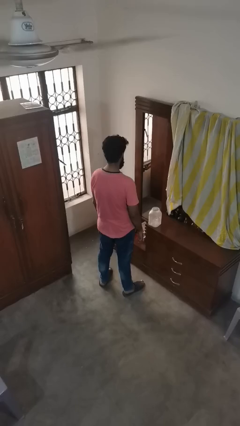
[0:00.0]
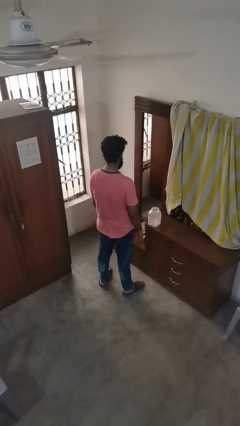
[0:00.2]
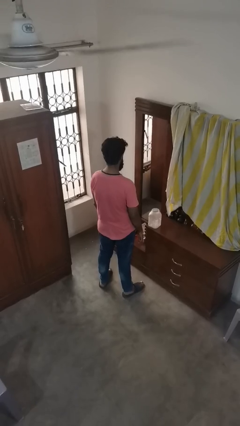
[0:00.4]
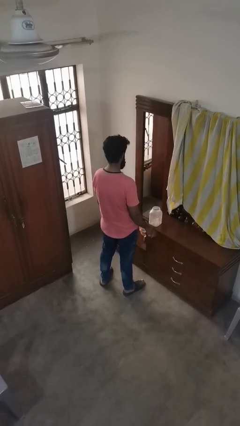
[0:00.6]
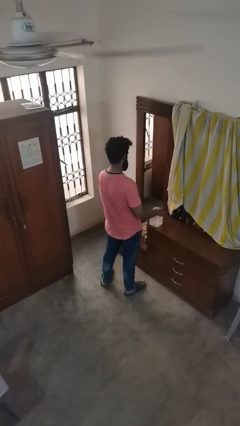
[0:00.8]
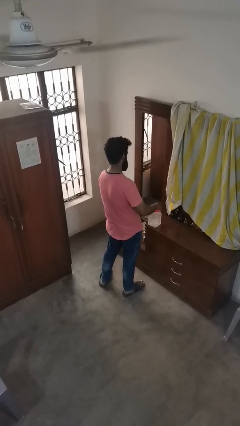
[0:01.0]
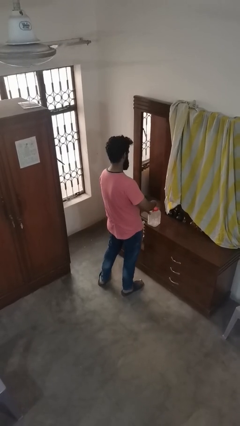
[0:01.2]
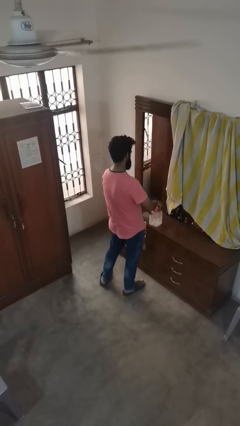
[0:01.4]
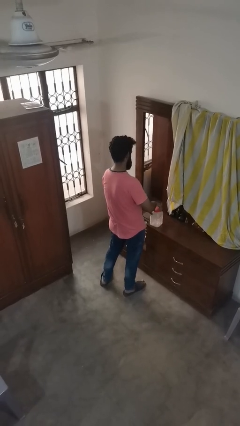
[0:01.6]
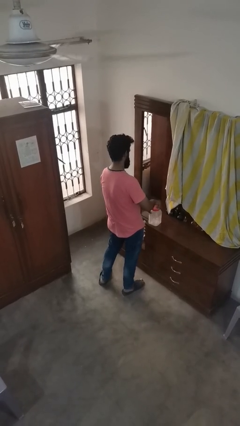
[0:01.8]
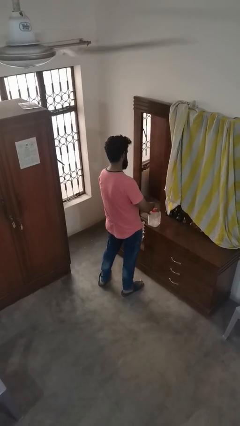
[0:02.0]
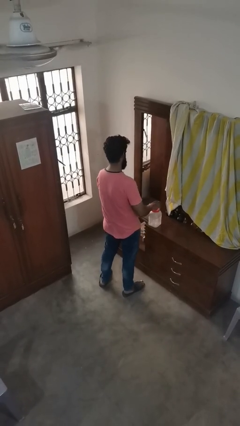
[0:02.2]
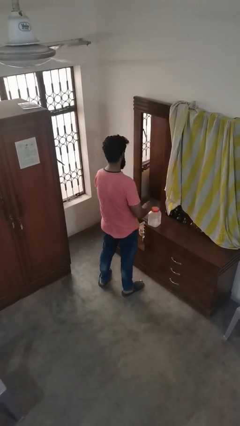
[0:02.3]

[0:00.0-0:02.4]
person closes jar

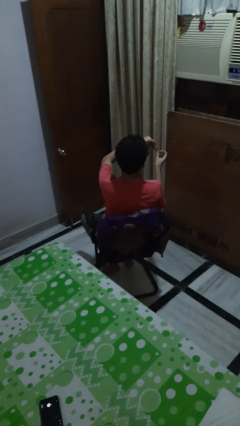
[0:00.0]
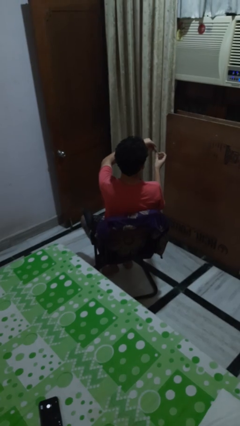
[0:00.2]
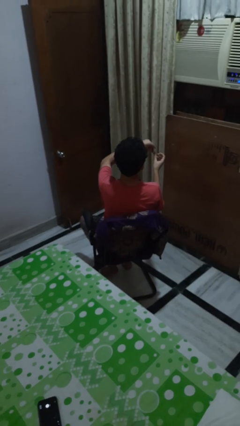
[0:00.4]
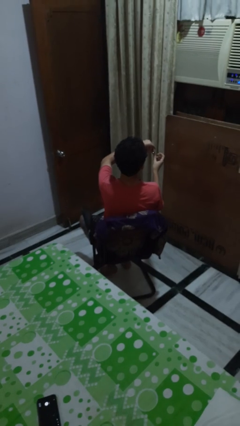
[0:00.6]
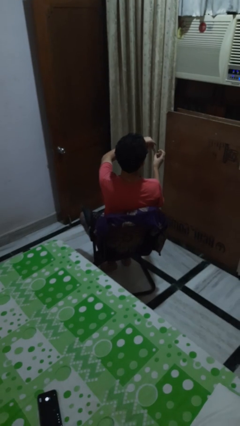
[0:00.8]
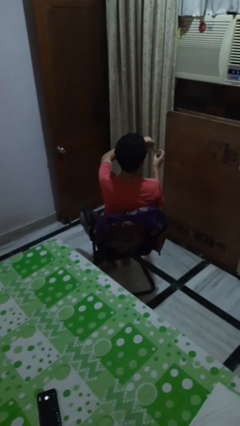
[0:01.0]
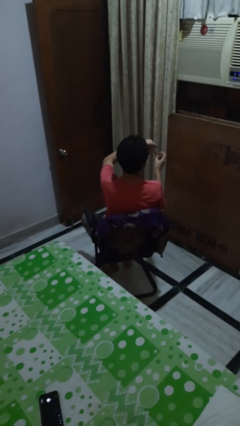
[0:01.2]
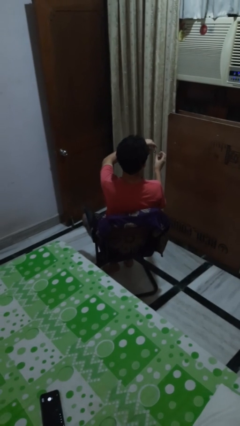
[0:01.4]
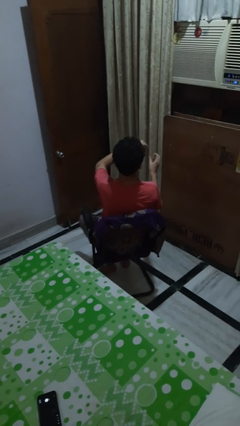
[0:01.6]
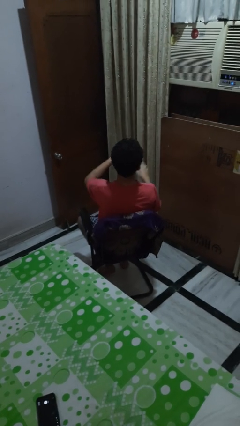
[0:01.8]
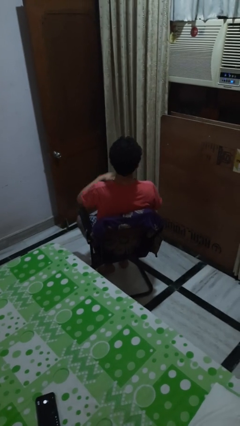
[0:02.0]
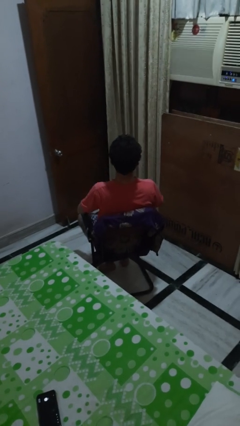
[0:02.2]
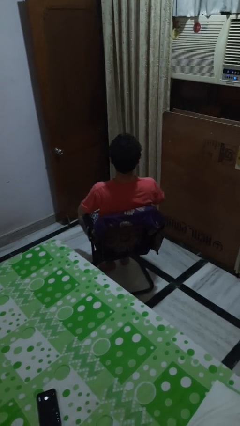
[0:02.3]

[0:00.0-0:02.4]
person clips fingernails

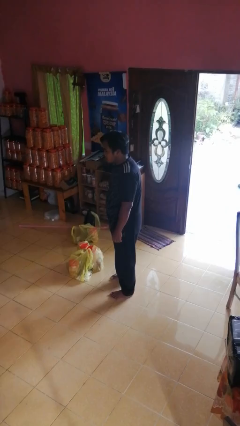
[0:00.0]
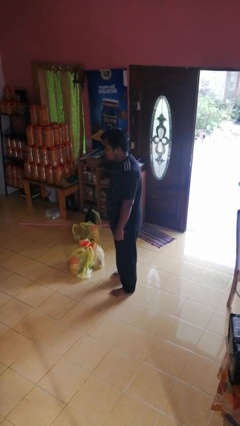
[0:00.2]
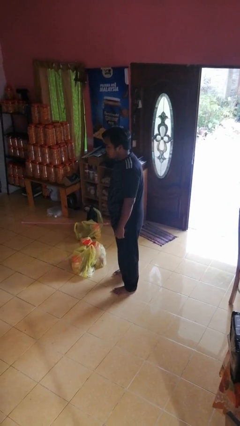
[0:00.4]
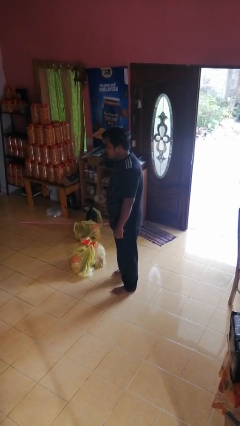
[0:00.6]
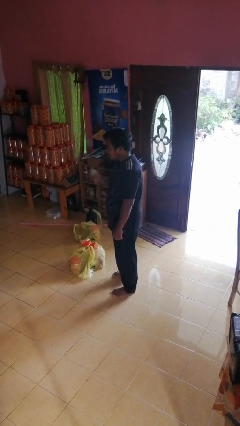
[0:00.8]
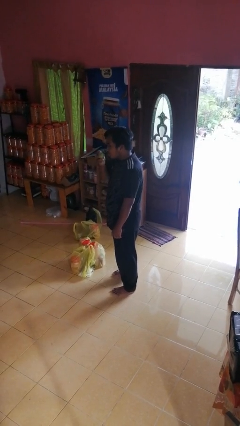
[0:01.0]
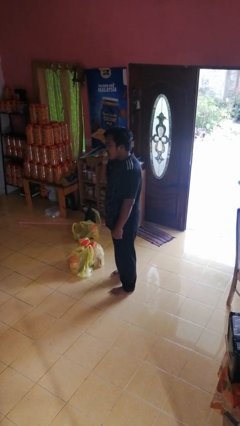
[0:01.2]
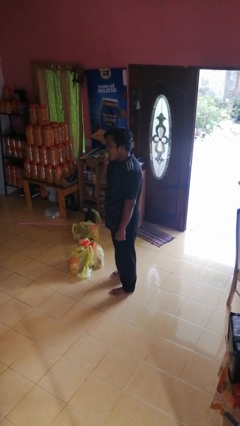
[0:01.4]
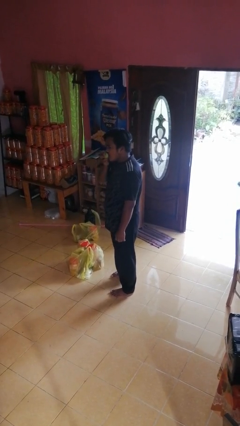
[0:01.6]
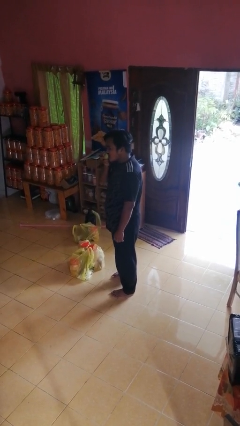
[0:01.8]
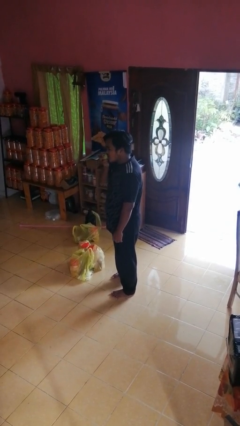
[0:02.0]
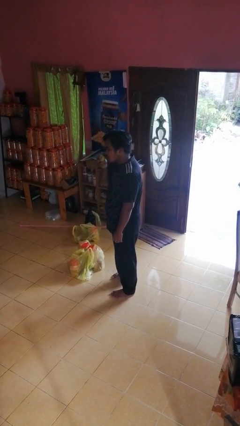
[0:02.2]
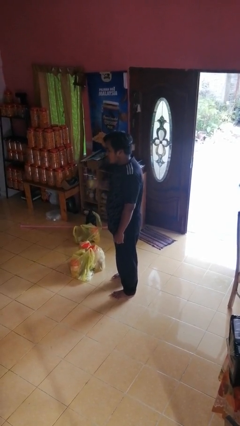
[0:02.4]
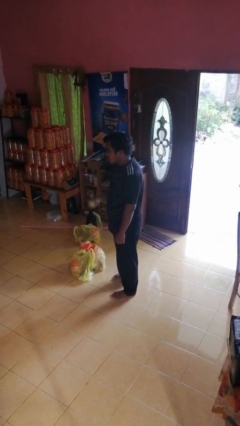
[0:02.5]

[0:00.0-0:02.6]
person eats apple

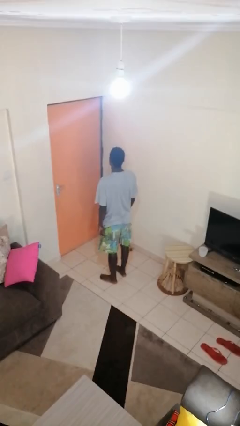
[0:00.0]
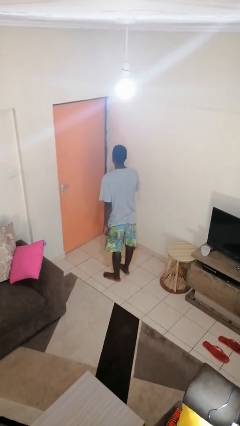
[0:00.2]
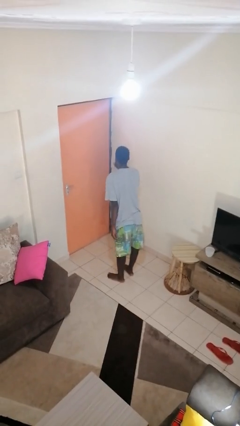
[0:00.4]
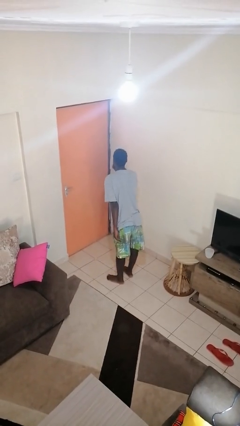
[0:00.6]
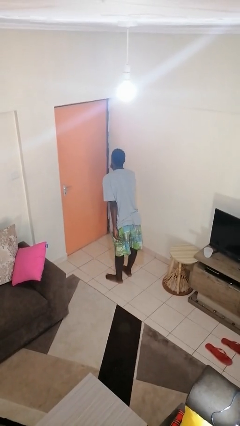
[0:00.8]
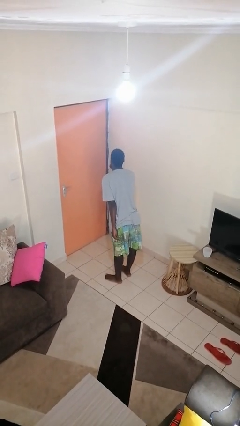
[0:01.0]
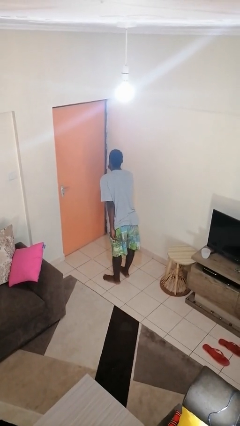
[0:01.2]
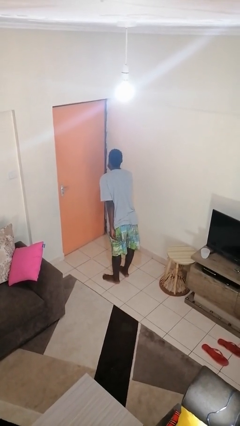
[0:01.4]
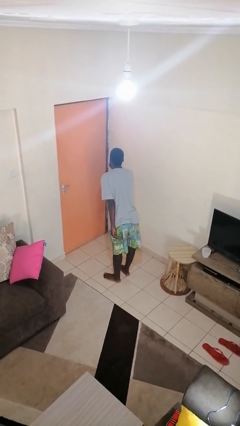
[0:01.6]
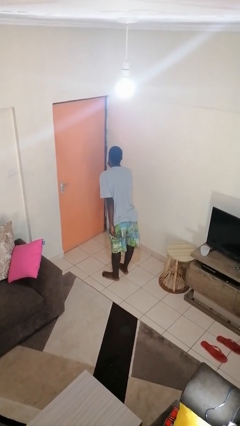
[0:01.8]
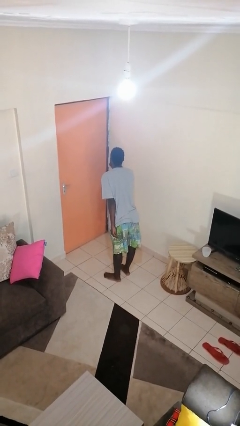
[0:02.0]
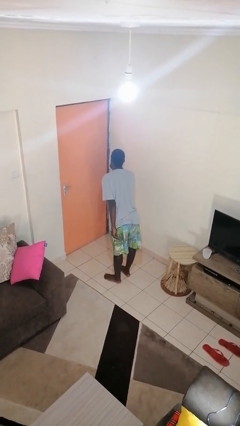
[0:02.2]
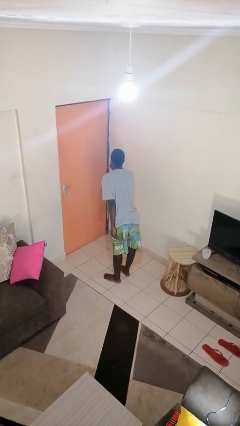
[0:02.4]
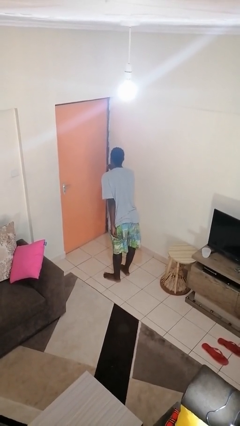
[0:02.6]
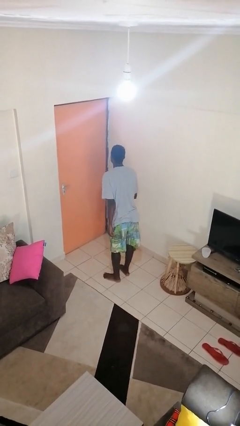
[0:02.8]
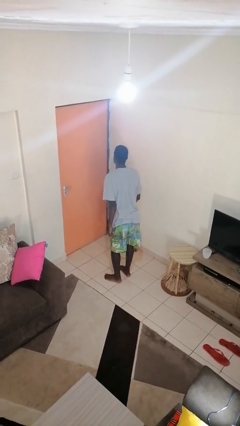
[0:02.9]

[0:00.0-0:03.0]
person gestures be quiet

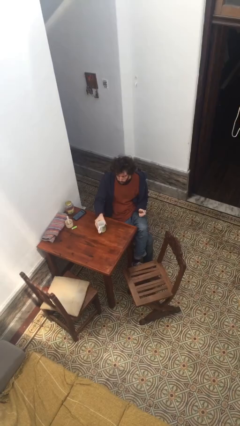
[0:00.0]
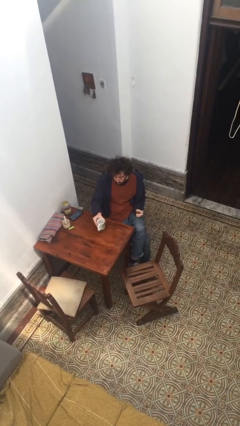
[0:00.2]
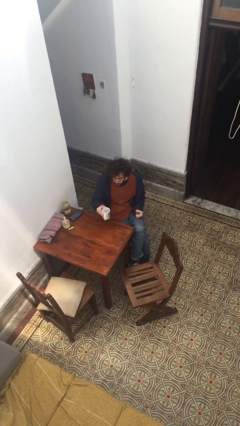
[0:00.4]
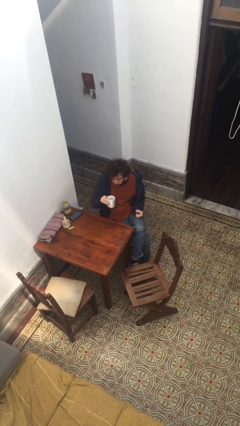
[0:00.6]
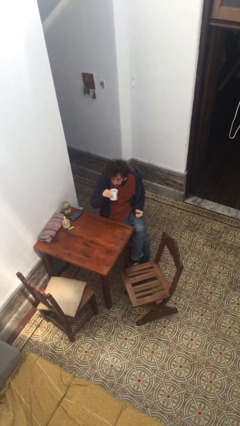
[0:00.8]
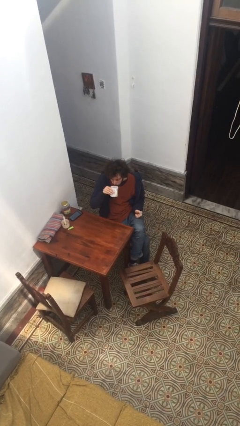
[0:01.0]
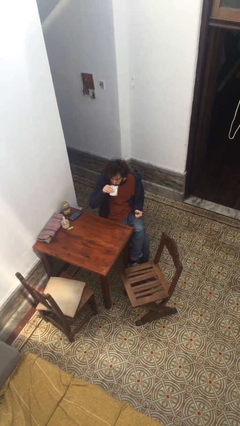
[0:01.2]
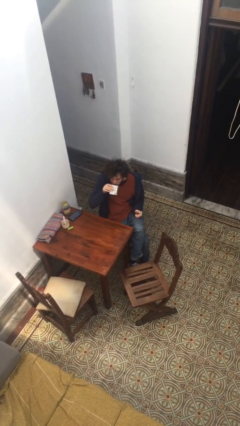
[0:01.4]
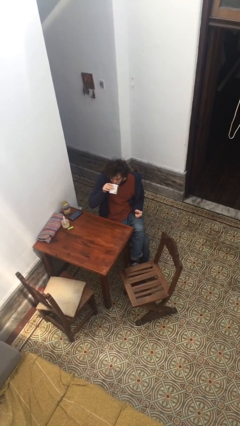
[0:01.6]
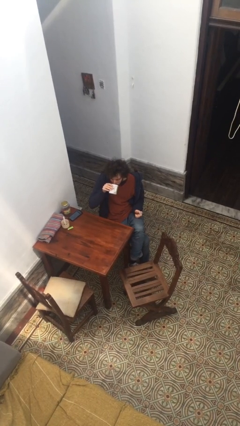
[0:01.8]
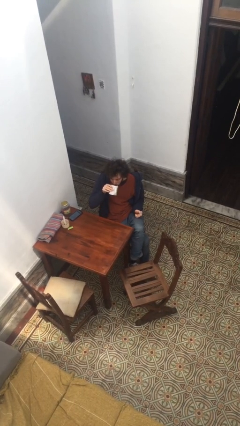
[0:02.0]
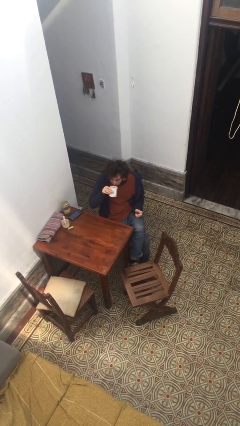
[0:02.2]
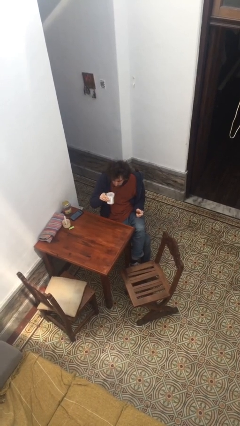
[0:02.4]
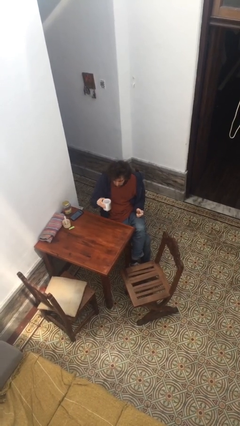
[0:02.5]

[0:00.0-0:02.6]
person drinks from cup

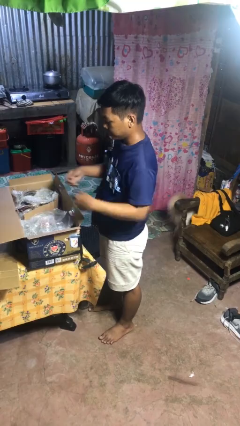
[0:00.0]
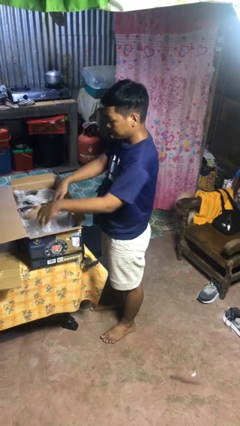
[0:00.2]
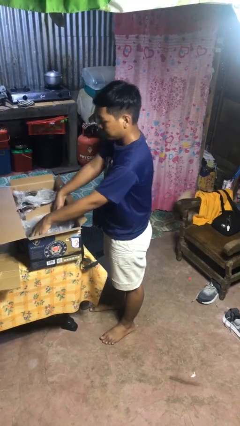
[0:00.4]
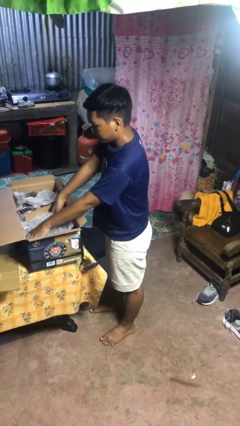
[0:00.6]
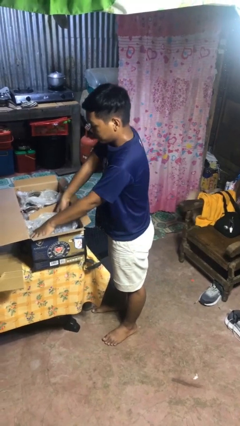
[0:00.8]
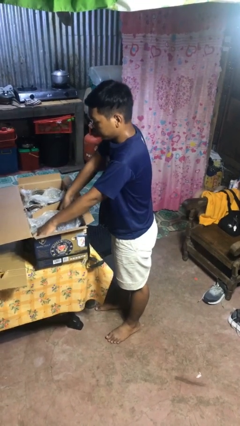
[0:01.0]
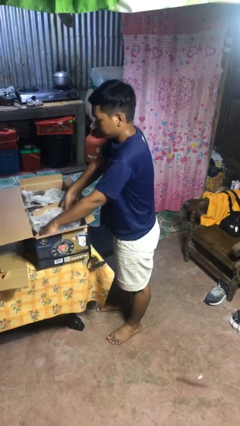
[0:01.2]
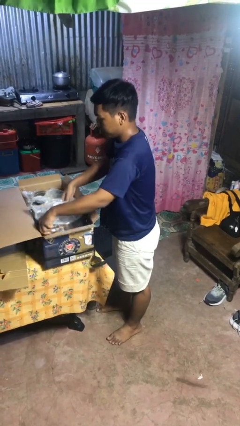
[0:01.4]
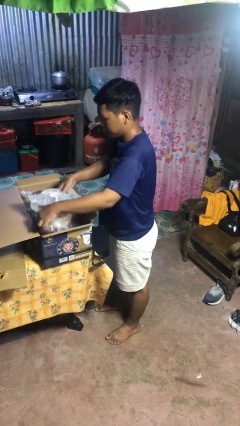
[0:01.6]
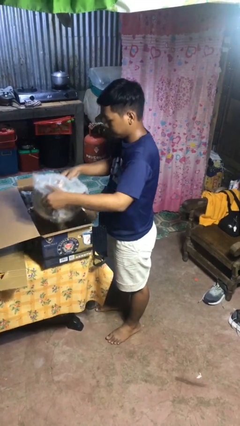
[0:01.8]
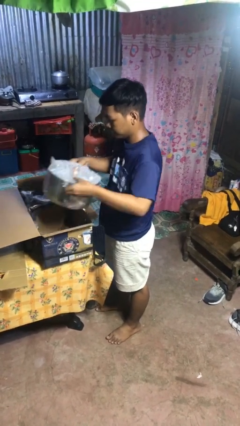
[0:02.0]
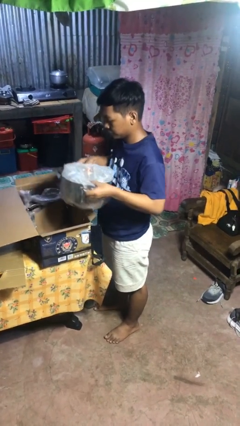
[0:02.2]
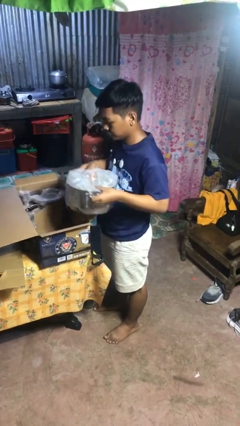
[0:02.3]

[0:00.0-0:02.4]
person takes object from box

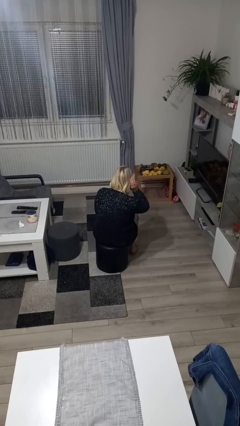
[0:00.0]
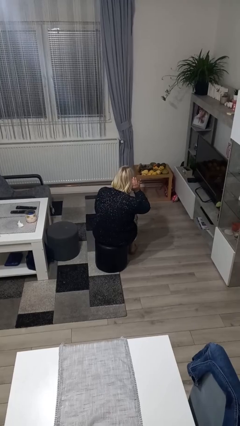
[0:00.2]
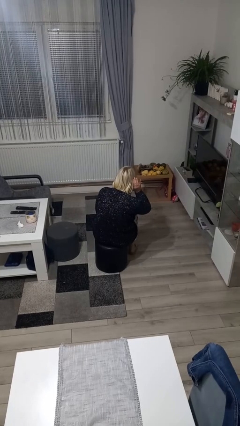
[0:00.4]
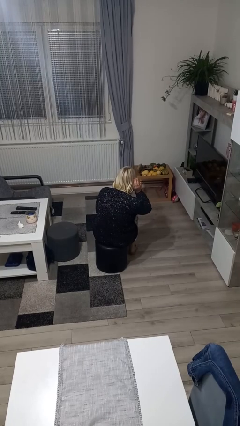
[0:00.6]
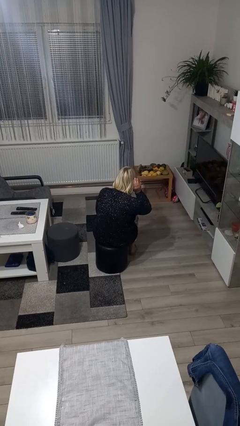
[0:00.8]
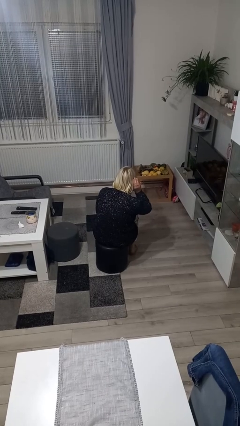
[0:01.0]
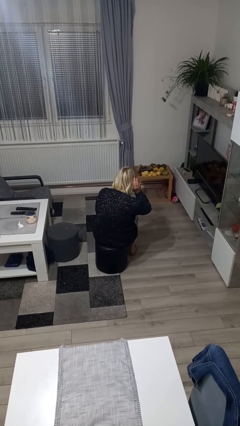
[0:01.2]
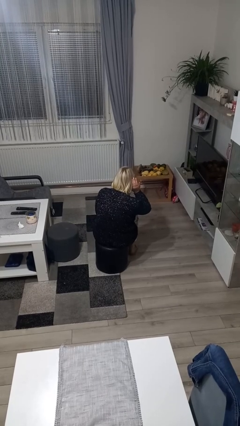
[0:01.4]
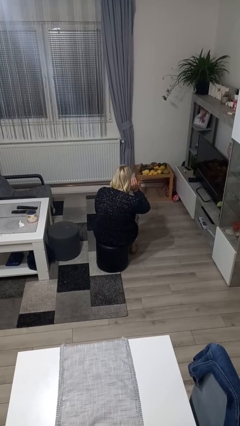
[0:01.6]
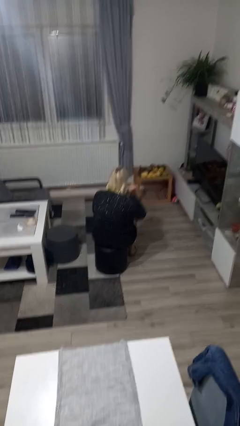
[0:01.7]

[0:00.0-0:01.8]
person gestures listen closely

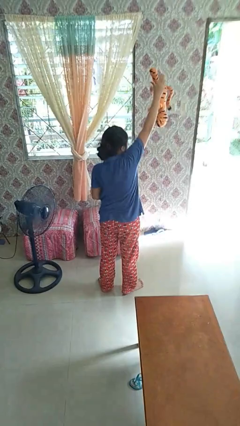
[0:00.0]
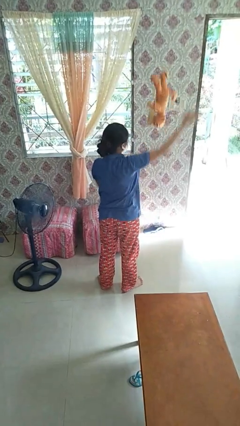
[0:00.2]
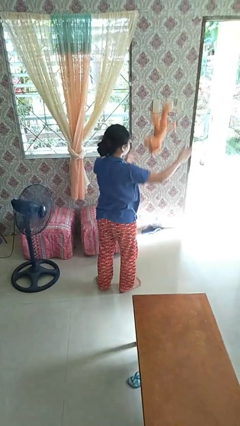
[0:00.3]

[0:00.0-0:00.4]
person drops object
